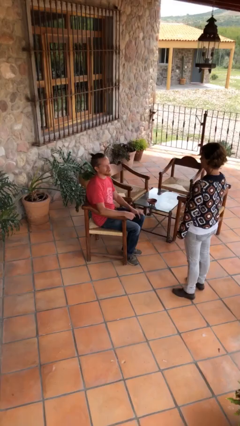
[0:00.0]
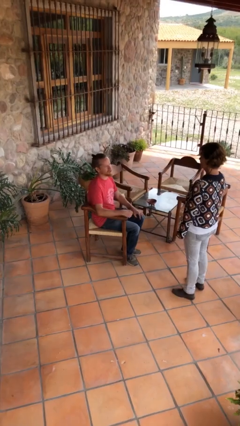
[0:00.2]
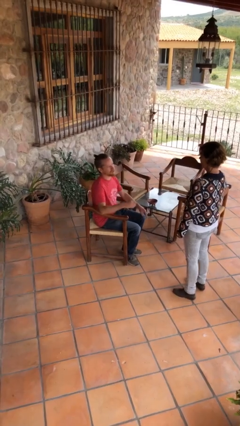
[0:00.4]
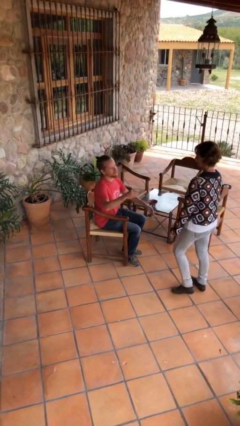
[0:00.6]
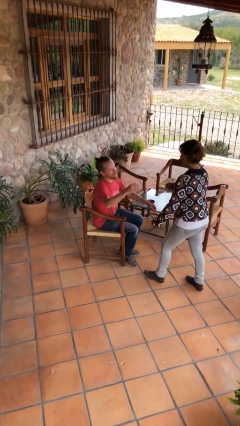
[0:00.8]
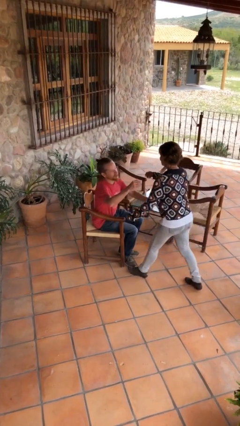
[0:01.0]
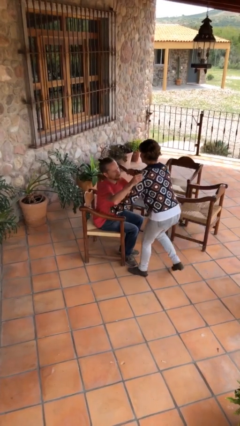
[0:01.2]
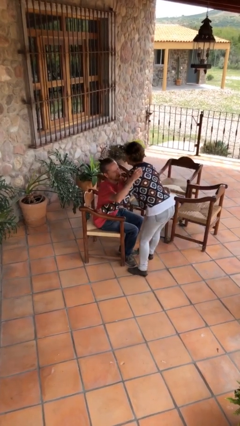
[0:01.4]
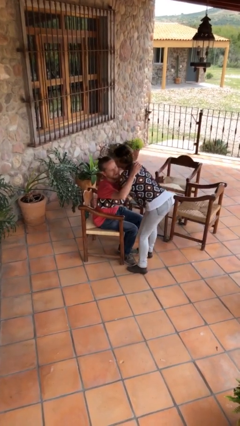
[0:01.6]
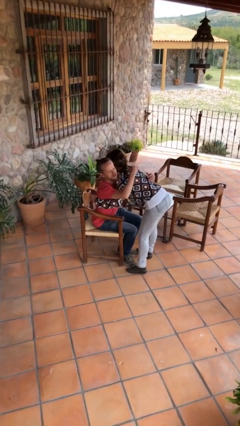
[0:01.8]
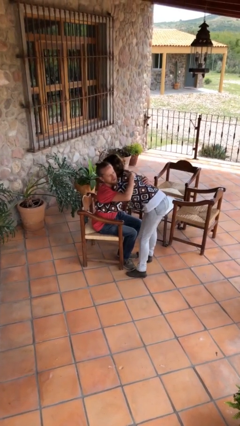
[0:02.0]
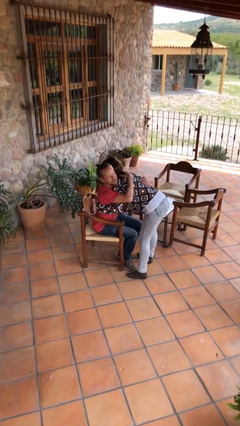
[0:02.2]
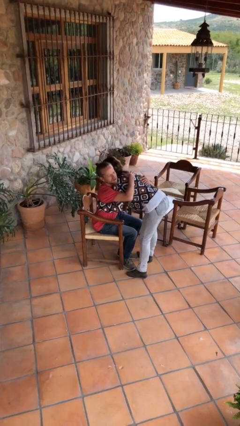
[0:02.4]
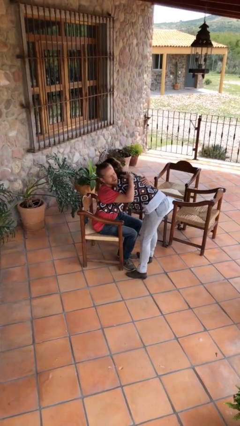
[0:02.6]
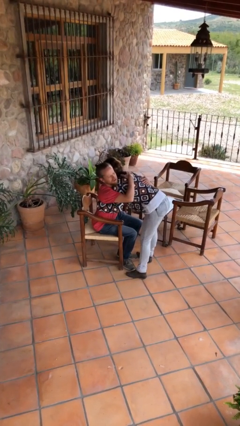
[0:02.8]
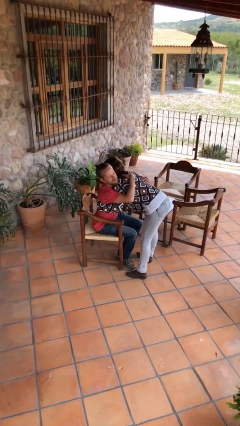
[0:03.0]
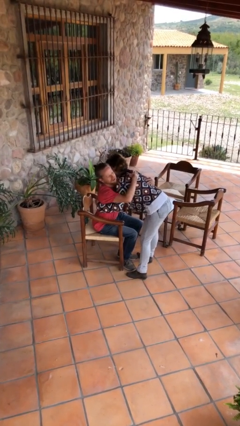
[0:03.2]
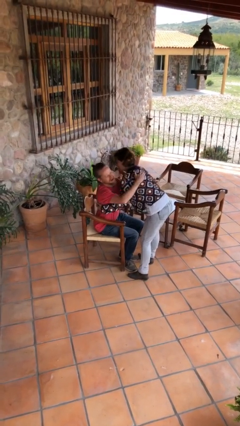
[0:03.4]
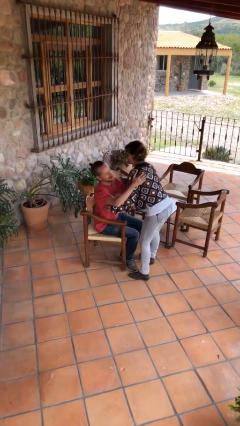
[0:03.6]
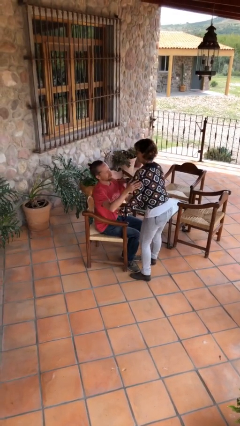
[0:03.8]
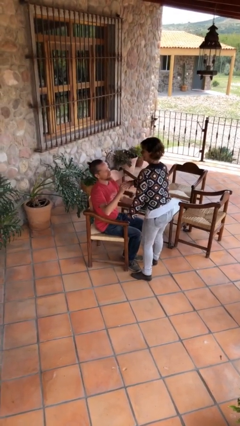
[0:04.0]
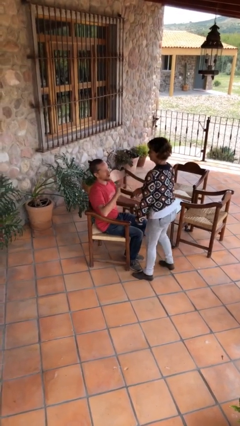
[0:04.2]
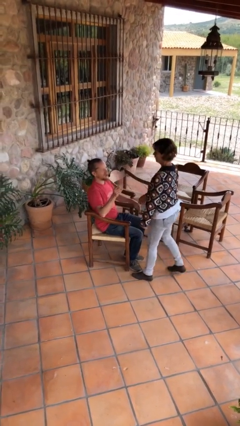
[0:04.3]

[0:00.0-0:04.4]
person embraces person

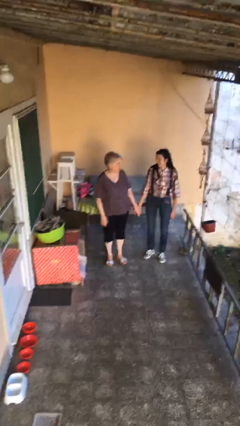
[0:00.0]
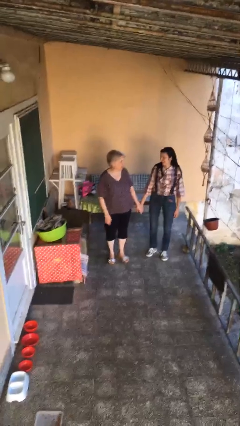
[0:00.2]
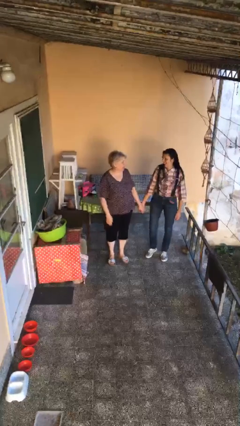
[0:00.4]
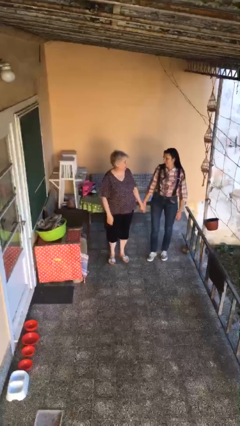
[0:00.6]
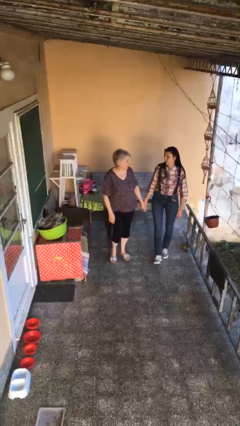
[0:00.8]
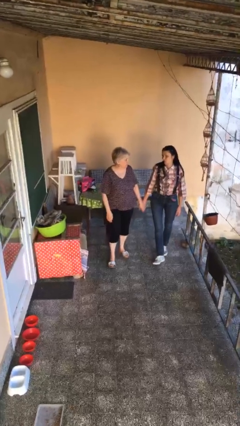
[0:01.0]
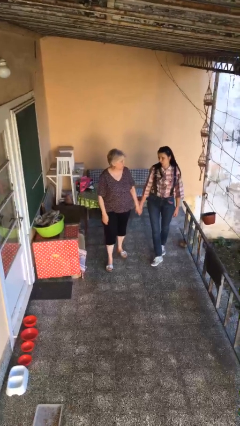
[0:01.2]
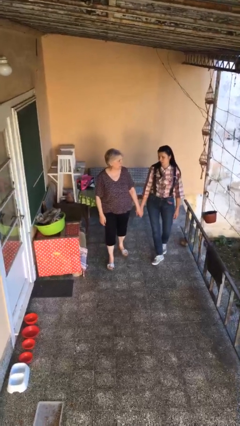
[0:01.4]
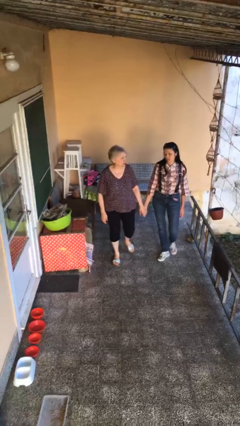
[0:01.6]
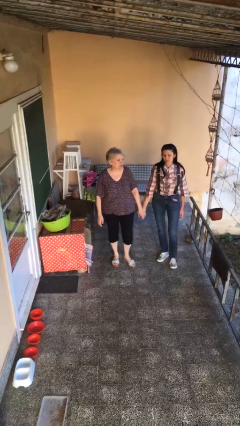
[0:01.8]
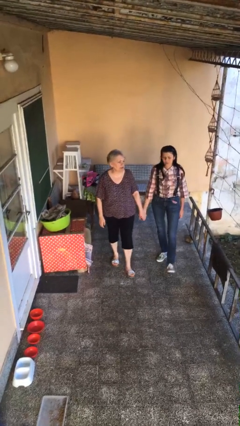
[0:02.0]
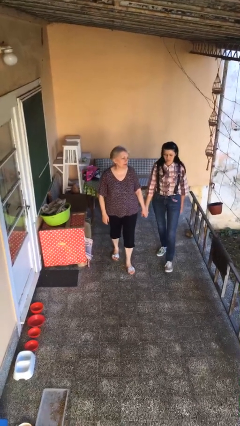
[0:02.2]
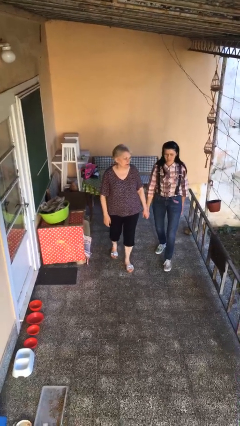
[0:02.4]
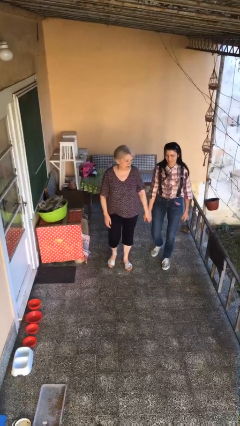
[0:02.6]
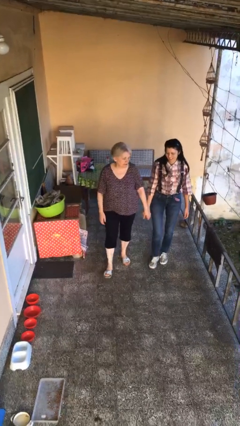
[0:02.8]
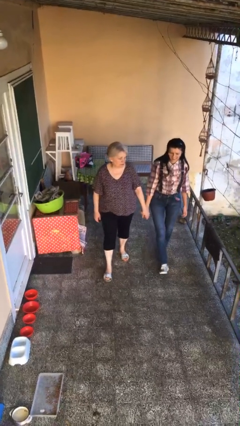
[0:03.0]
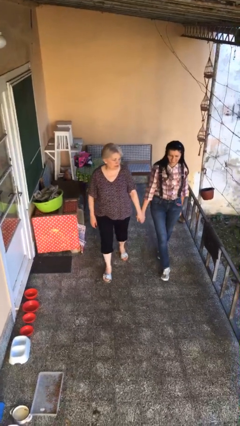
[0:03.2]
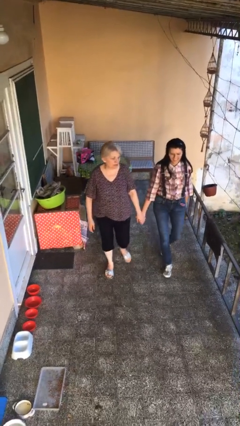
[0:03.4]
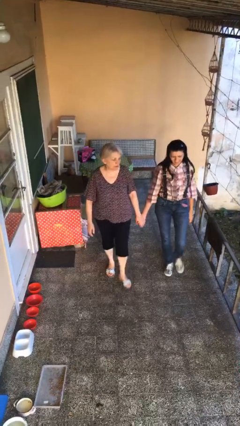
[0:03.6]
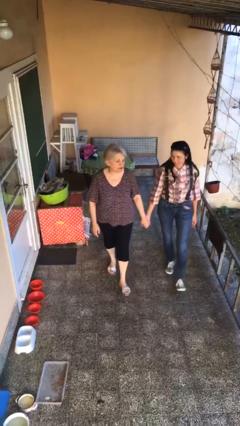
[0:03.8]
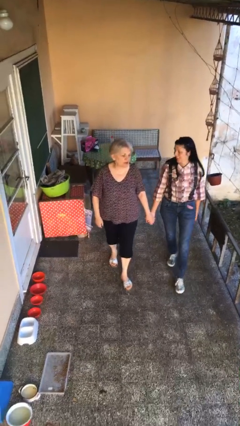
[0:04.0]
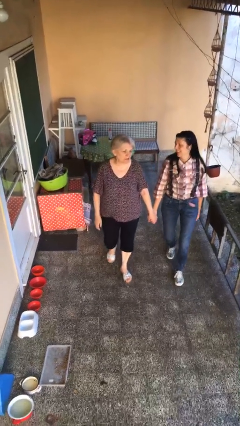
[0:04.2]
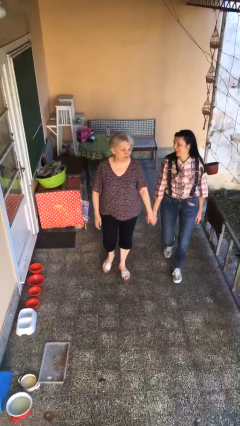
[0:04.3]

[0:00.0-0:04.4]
person holds hand

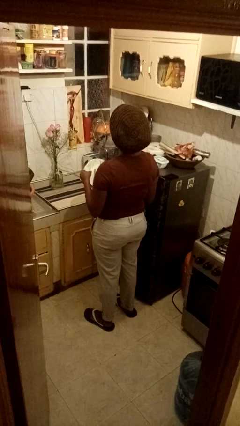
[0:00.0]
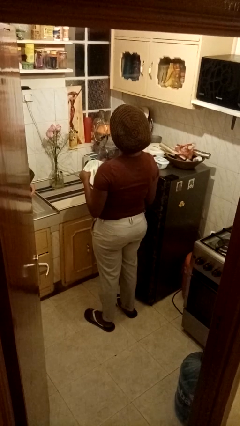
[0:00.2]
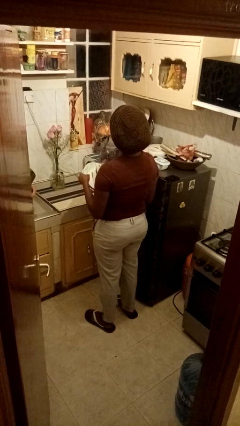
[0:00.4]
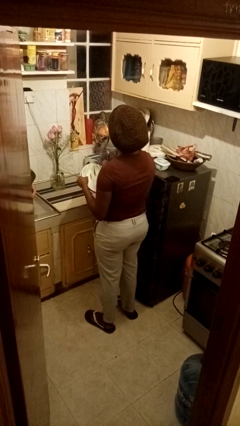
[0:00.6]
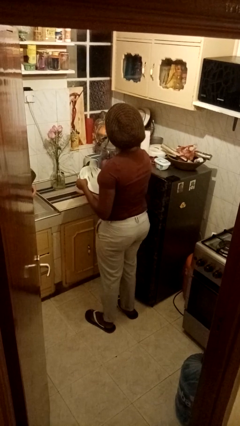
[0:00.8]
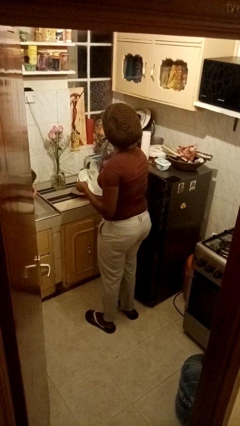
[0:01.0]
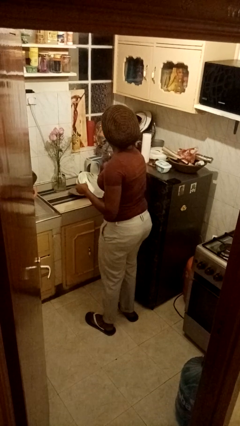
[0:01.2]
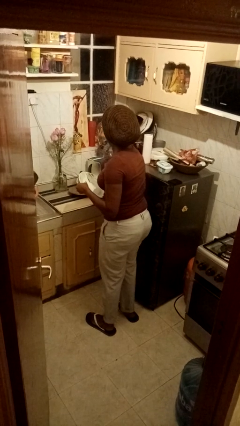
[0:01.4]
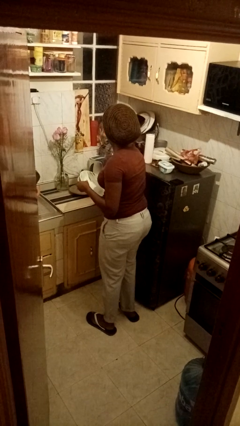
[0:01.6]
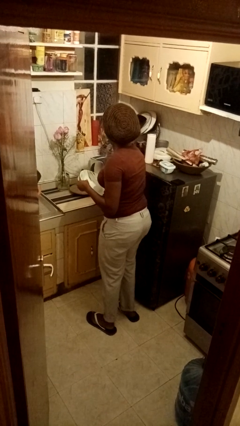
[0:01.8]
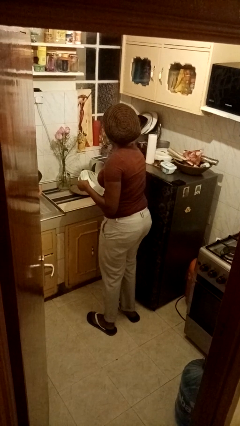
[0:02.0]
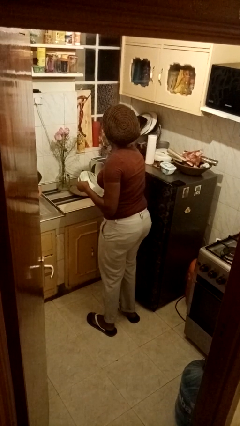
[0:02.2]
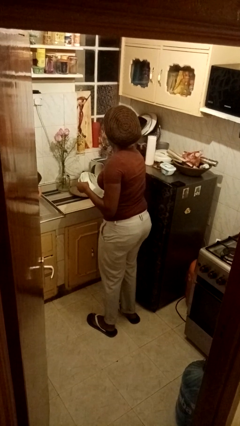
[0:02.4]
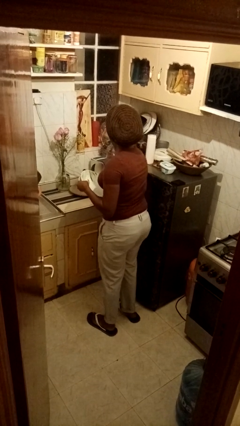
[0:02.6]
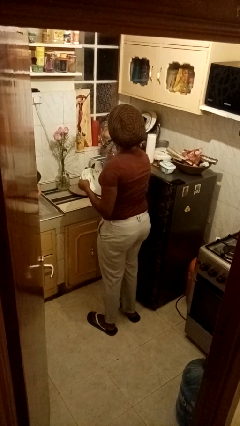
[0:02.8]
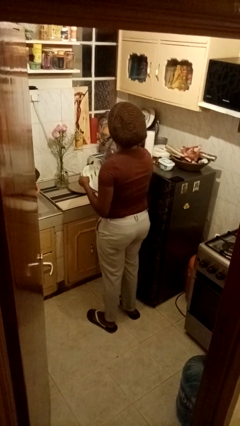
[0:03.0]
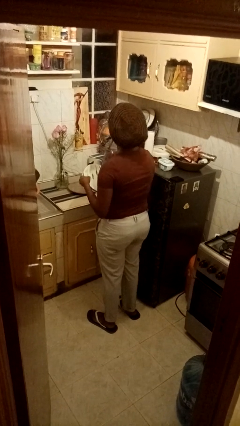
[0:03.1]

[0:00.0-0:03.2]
person sets table

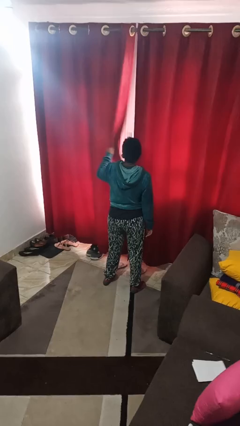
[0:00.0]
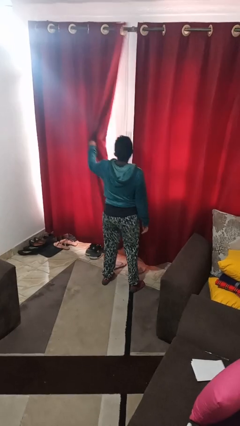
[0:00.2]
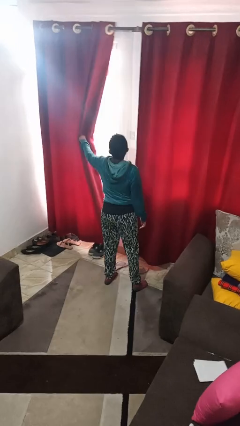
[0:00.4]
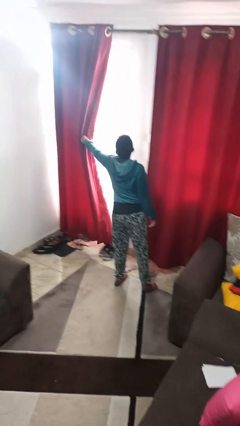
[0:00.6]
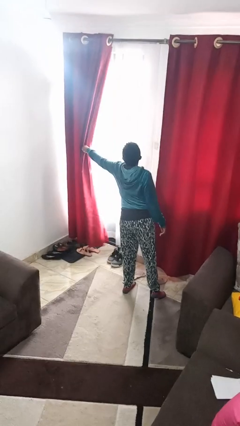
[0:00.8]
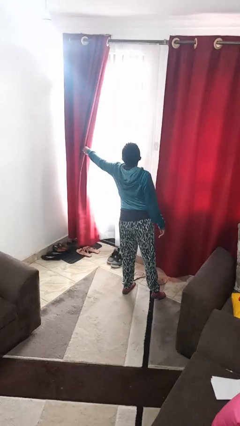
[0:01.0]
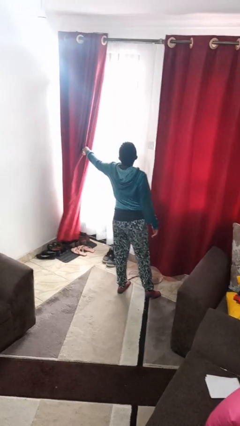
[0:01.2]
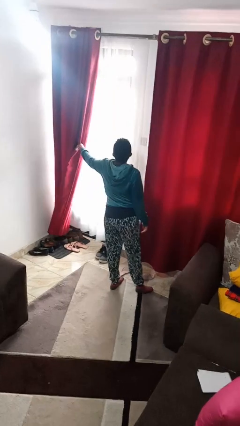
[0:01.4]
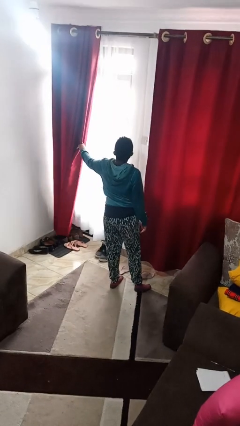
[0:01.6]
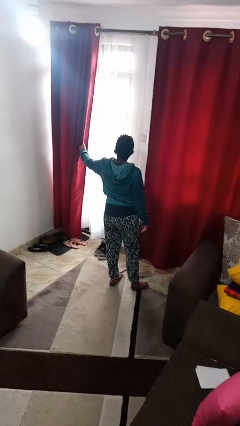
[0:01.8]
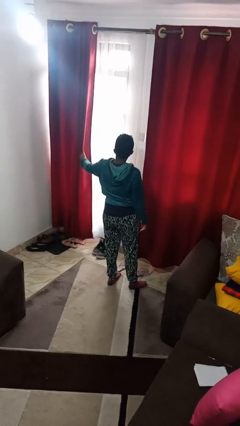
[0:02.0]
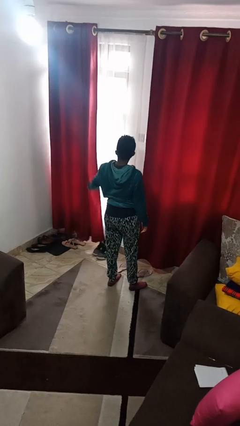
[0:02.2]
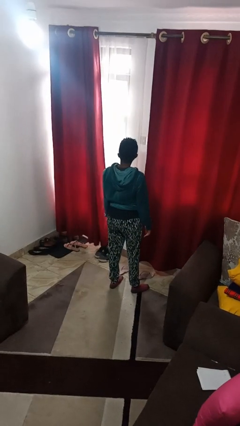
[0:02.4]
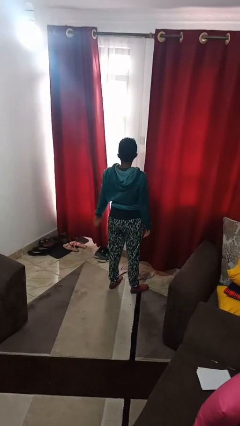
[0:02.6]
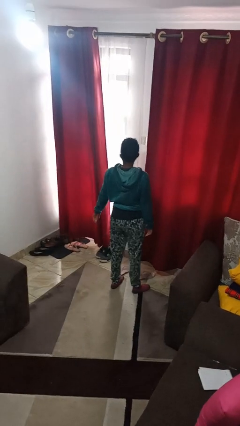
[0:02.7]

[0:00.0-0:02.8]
person opens curtains

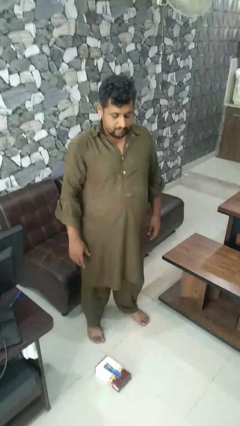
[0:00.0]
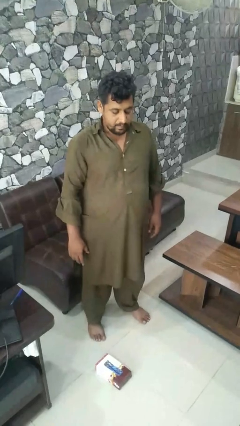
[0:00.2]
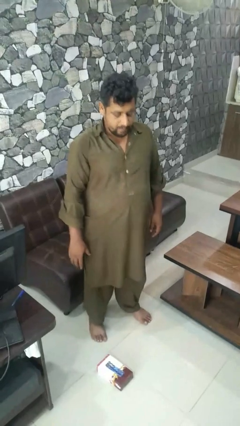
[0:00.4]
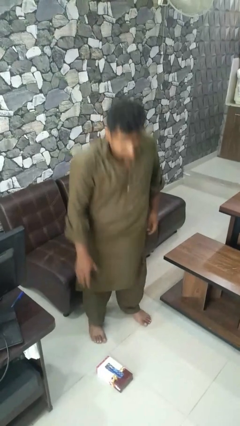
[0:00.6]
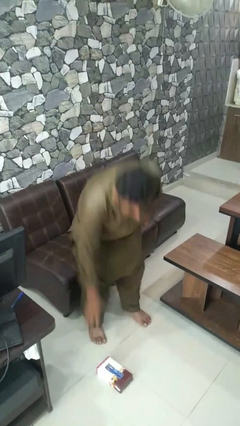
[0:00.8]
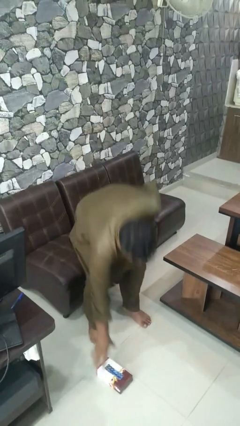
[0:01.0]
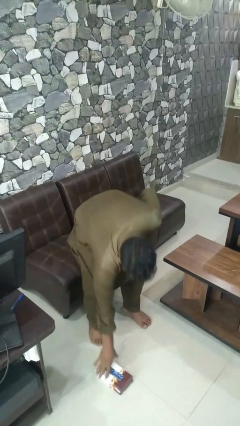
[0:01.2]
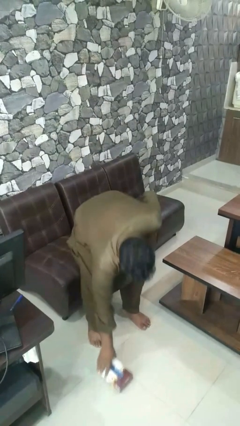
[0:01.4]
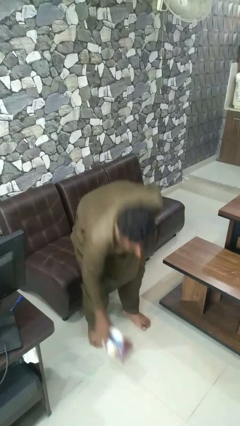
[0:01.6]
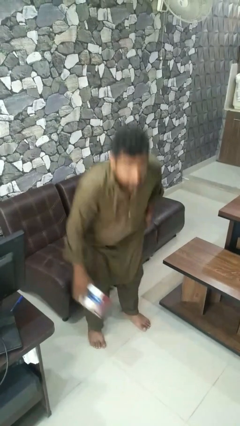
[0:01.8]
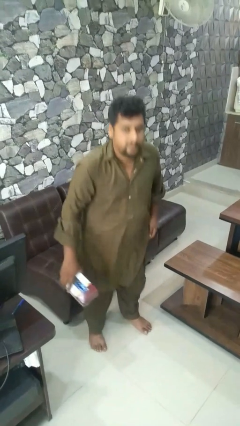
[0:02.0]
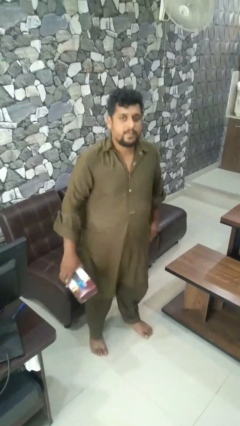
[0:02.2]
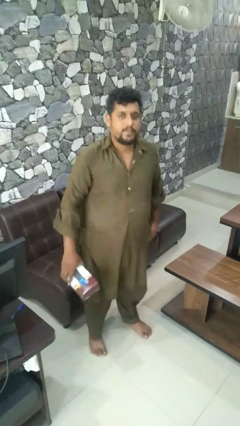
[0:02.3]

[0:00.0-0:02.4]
person picks up object from floor

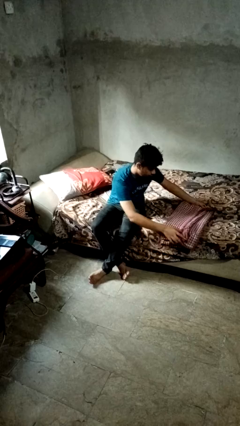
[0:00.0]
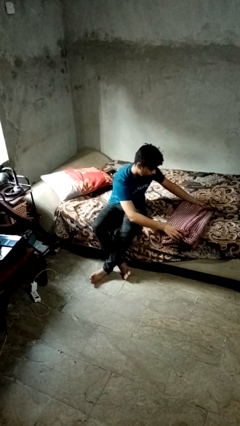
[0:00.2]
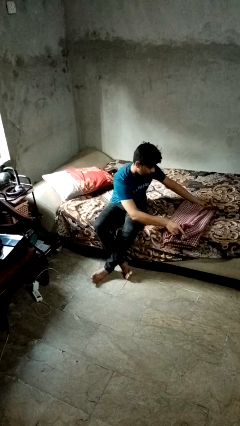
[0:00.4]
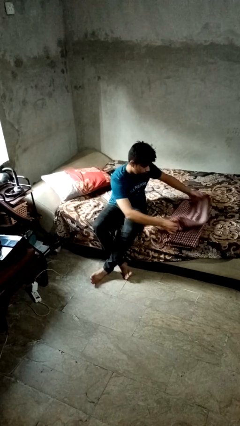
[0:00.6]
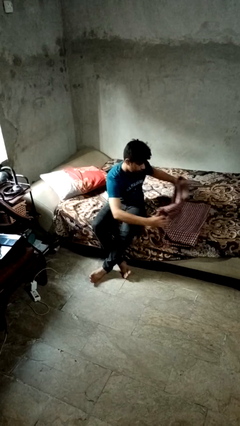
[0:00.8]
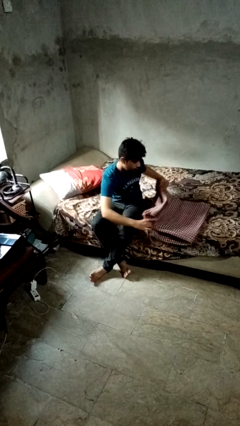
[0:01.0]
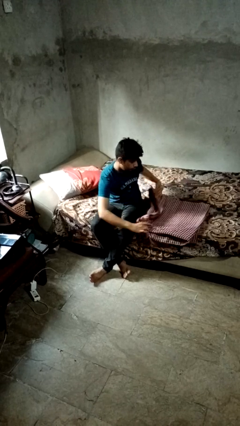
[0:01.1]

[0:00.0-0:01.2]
person unfolds blanket
